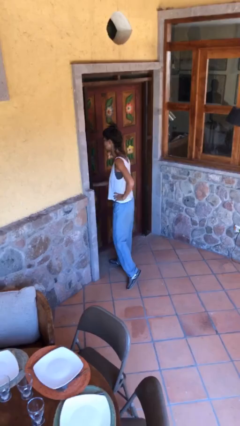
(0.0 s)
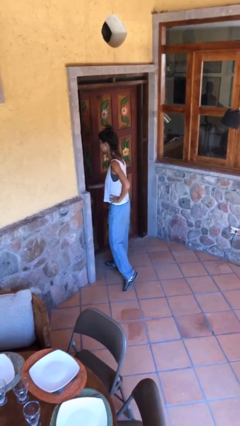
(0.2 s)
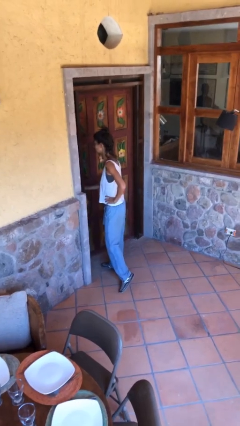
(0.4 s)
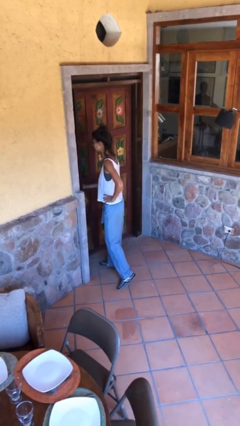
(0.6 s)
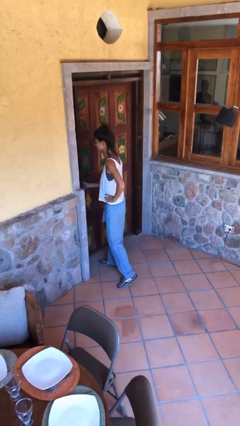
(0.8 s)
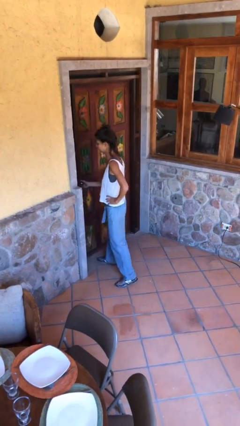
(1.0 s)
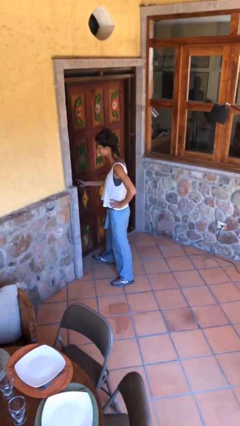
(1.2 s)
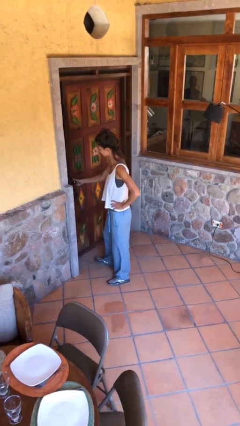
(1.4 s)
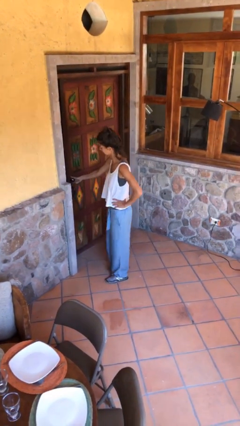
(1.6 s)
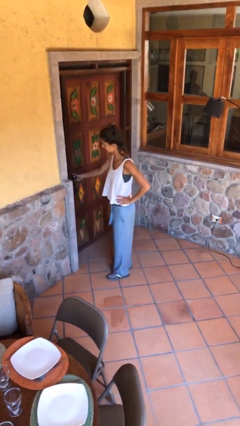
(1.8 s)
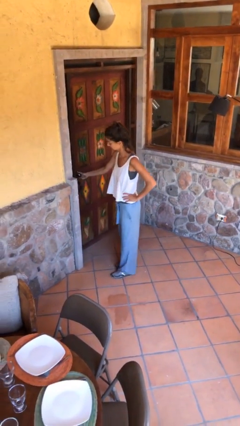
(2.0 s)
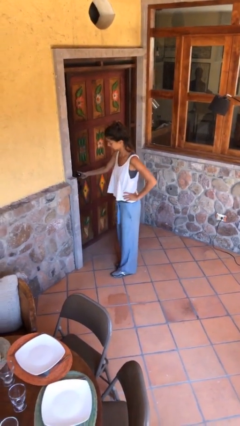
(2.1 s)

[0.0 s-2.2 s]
person closes facility door

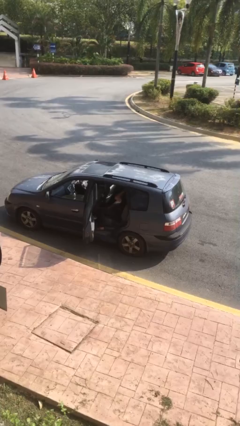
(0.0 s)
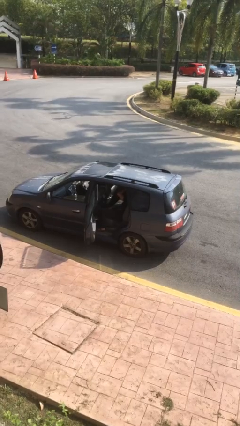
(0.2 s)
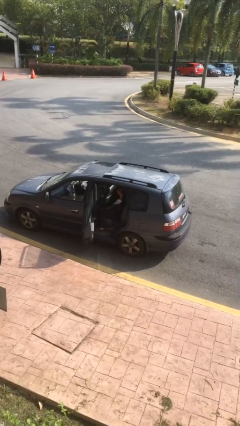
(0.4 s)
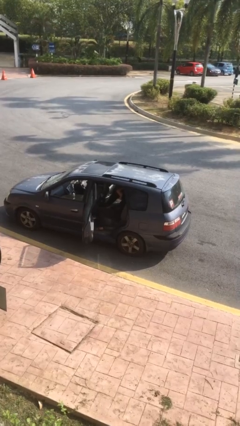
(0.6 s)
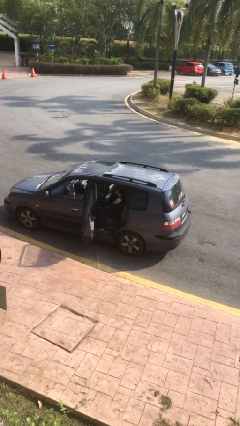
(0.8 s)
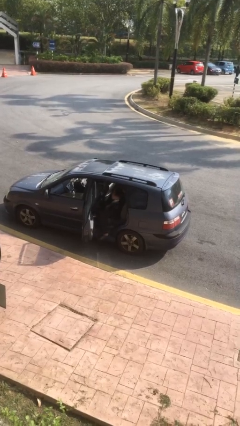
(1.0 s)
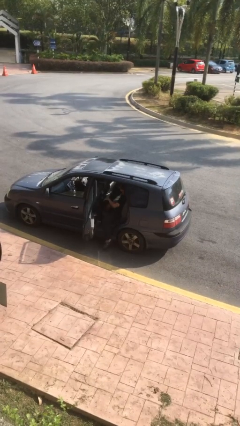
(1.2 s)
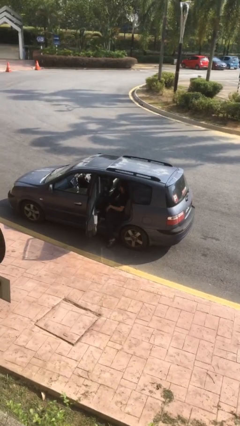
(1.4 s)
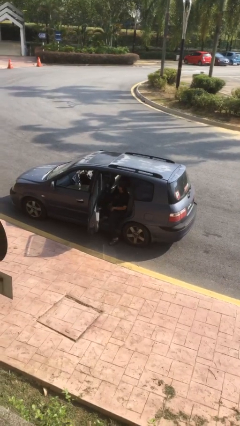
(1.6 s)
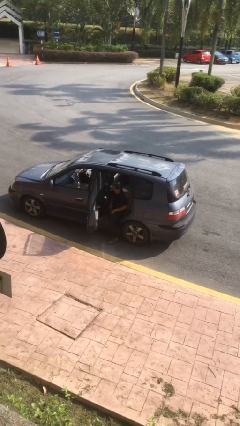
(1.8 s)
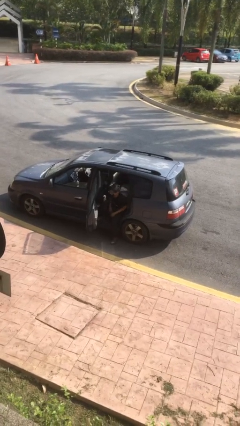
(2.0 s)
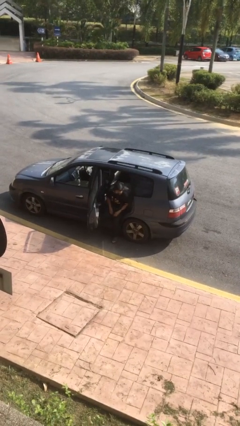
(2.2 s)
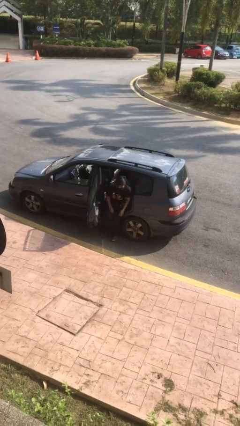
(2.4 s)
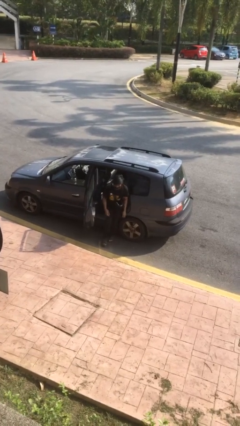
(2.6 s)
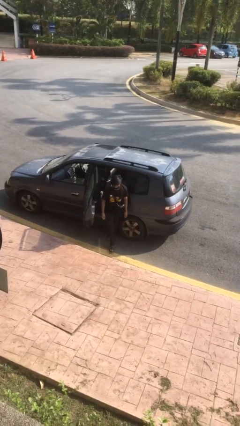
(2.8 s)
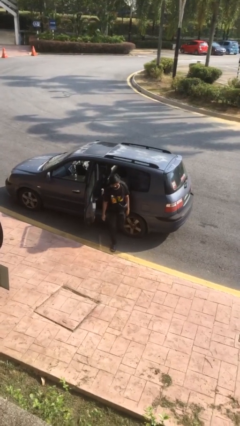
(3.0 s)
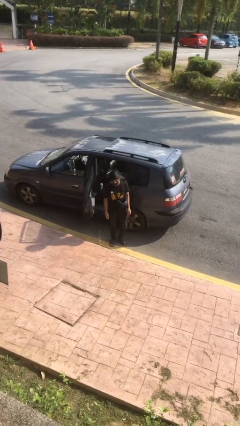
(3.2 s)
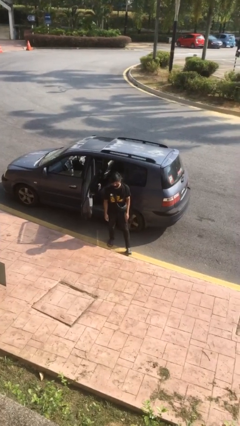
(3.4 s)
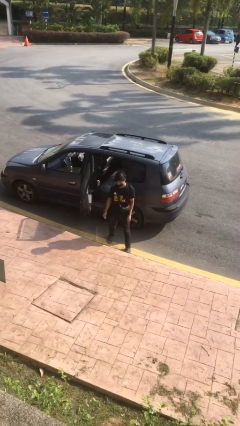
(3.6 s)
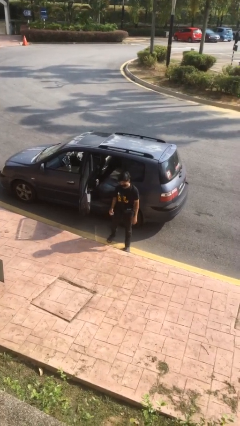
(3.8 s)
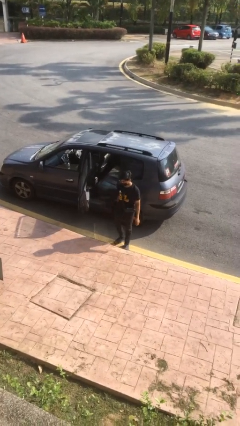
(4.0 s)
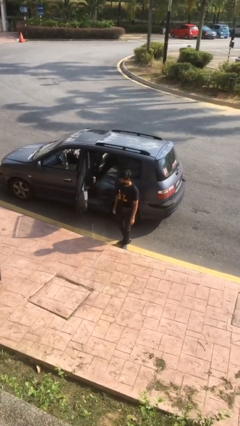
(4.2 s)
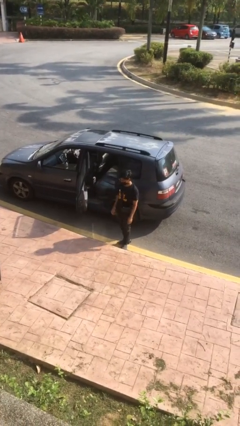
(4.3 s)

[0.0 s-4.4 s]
person exits car

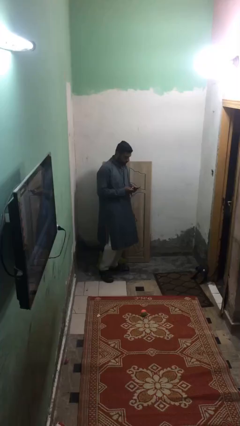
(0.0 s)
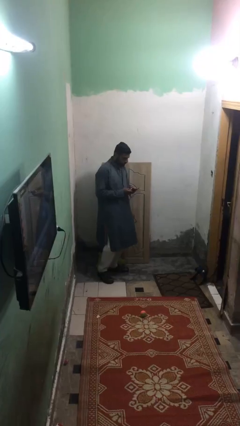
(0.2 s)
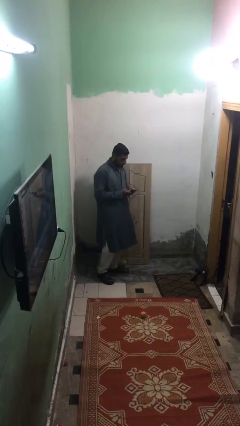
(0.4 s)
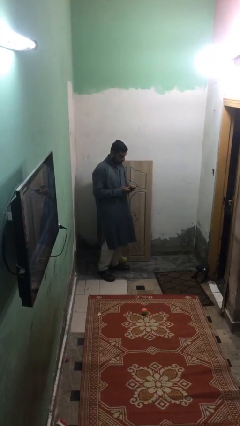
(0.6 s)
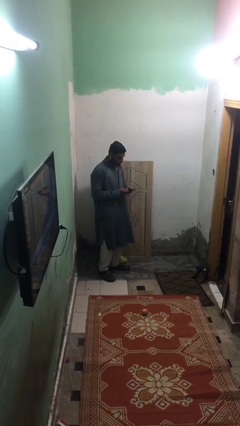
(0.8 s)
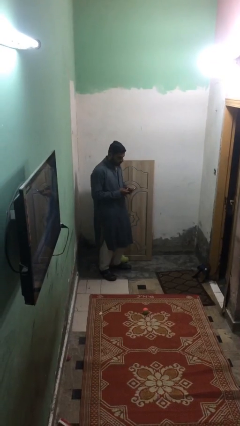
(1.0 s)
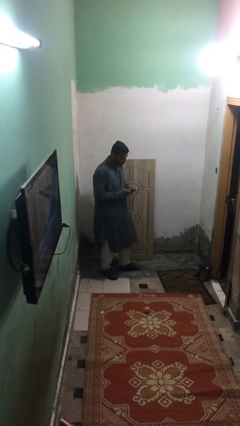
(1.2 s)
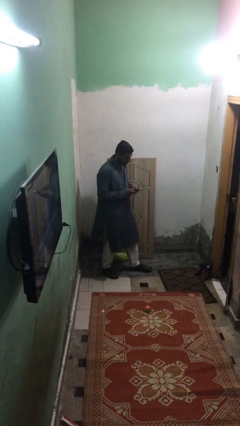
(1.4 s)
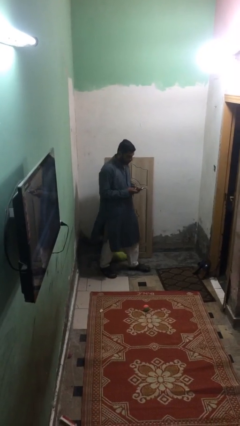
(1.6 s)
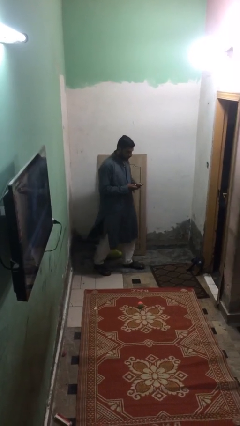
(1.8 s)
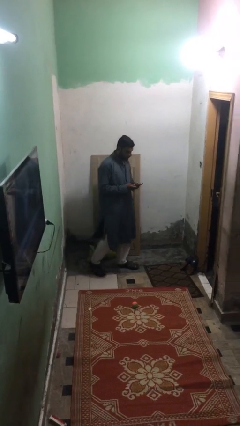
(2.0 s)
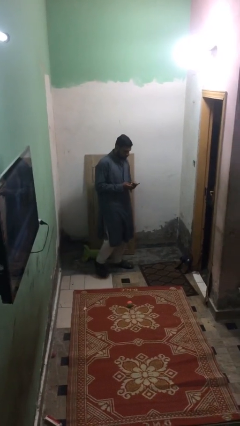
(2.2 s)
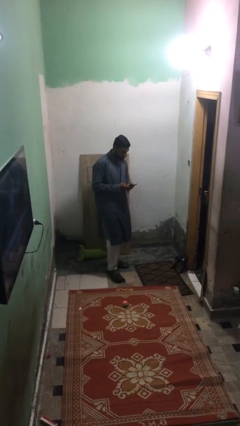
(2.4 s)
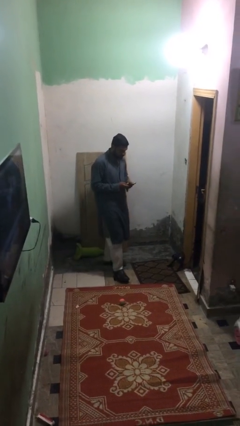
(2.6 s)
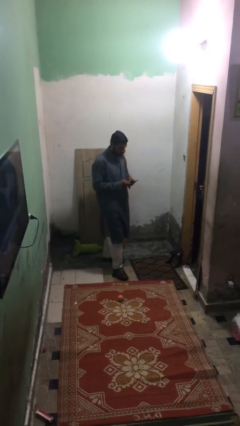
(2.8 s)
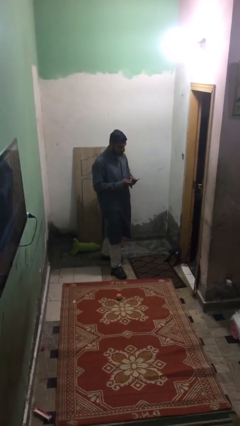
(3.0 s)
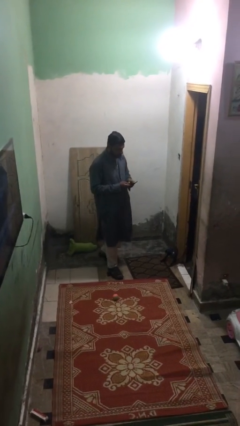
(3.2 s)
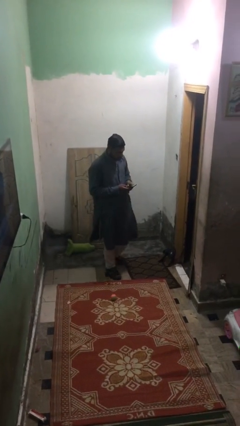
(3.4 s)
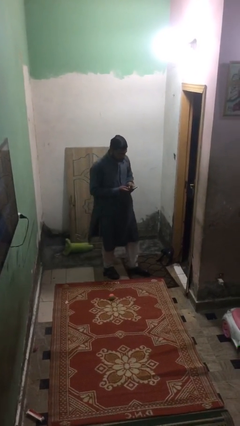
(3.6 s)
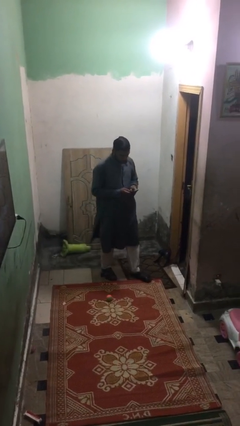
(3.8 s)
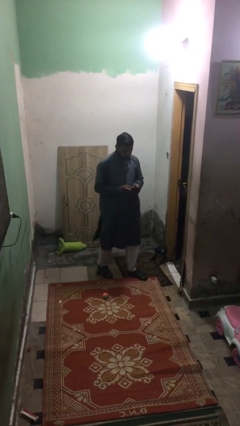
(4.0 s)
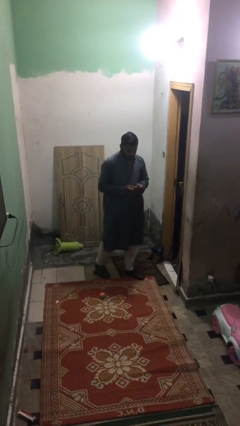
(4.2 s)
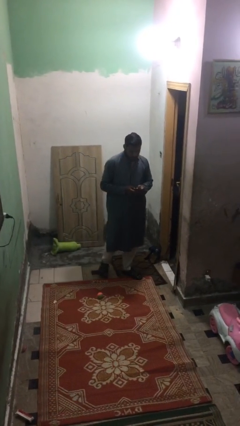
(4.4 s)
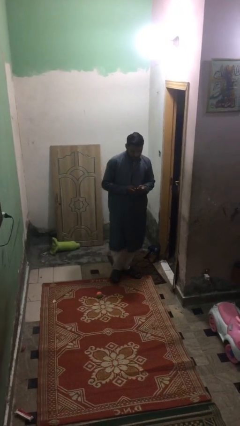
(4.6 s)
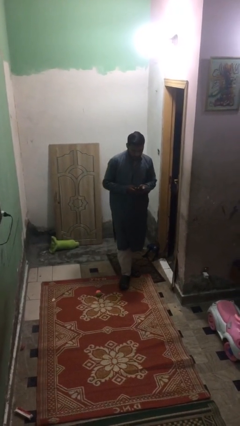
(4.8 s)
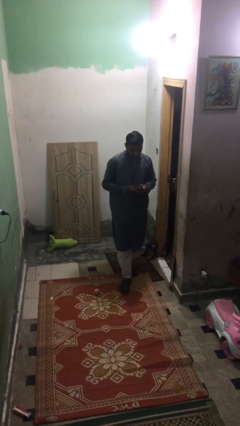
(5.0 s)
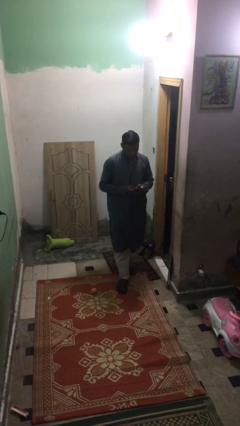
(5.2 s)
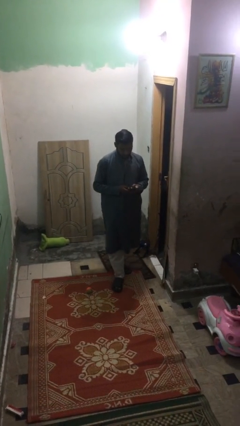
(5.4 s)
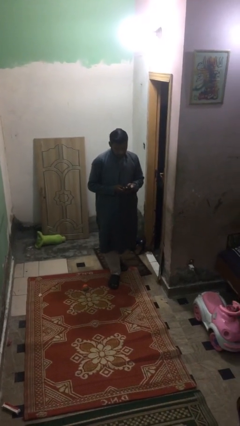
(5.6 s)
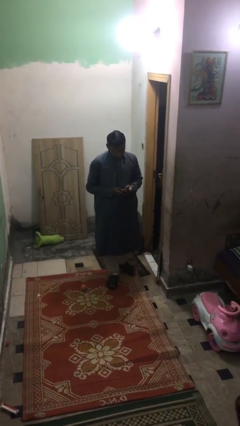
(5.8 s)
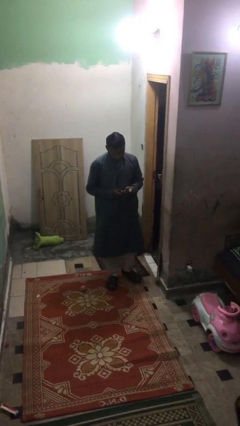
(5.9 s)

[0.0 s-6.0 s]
person texts on phone

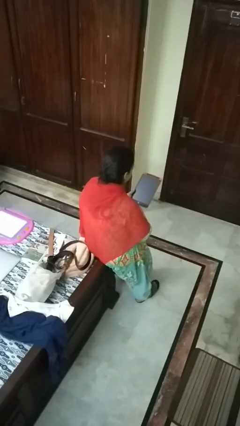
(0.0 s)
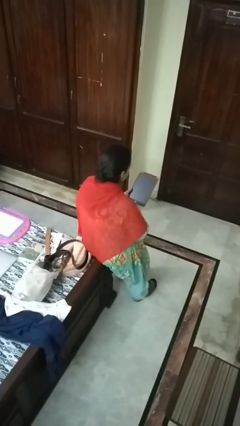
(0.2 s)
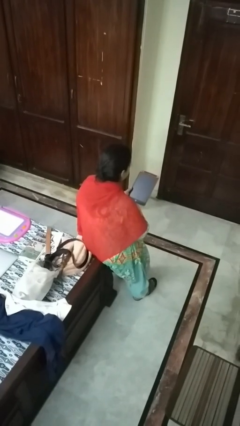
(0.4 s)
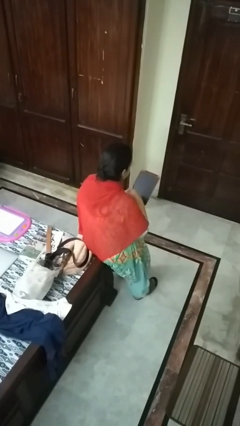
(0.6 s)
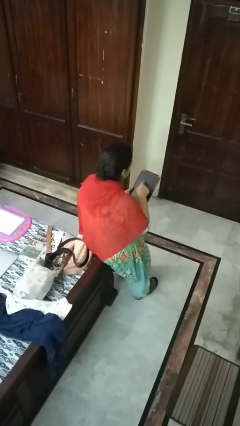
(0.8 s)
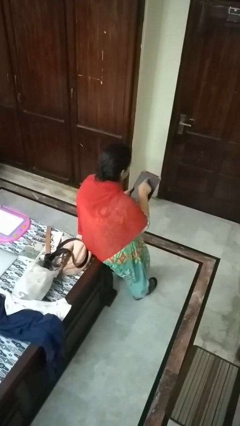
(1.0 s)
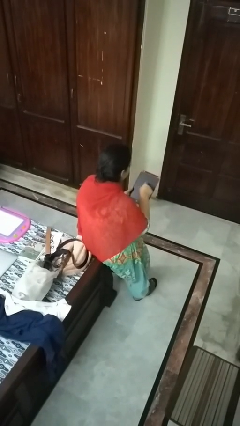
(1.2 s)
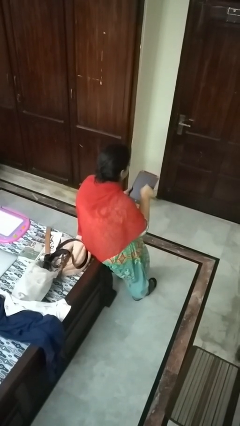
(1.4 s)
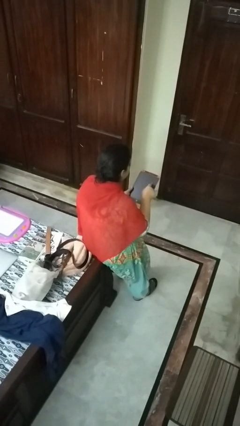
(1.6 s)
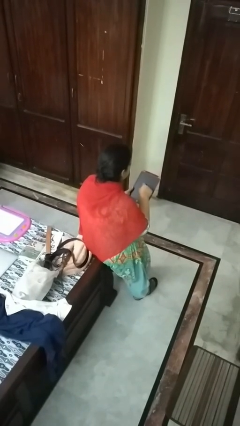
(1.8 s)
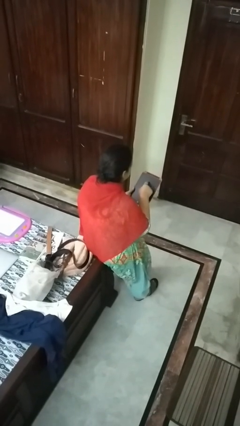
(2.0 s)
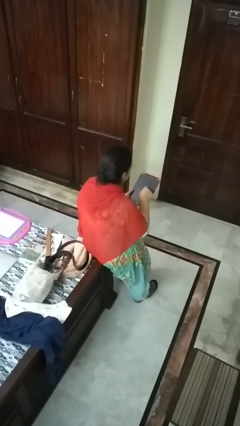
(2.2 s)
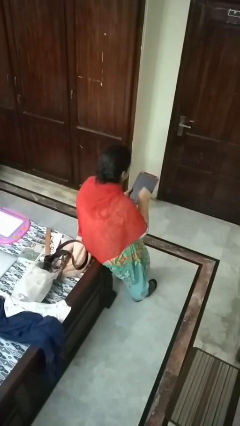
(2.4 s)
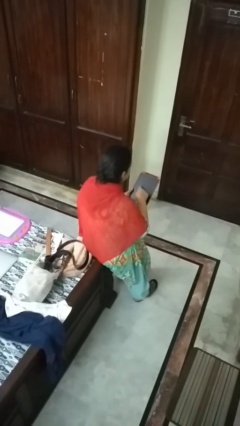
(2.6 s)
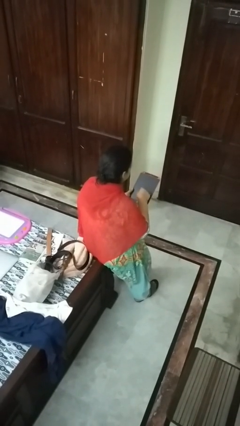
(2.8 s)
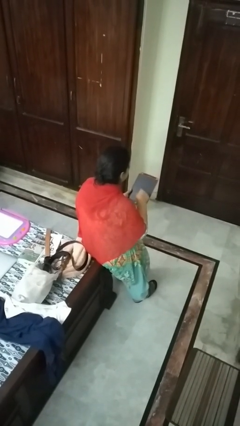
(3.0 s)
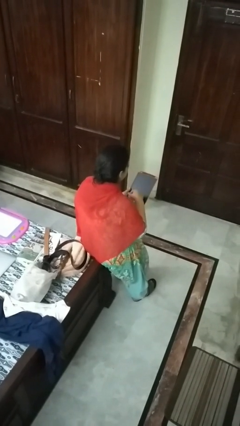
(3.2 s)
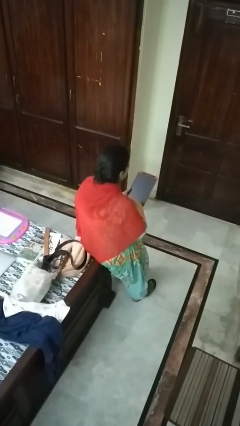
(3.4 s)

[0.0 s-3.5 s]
person interacts with tablet

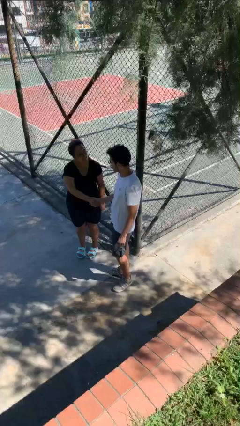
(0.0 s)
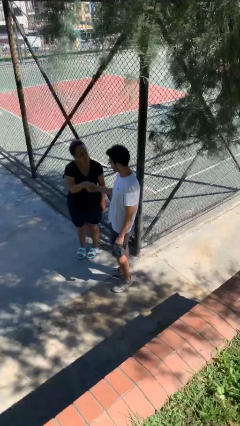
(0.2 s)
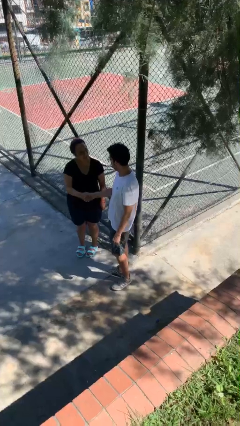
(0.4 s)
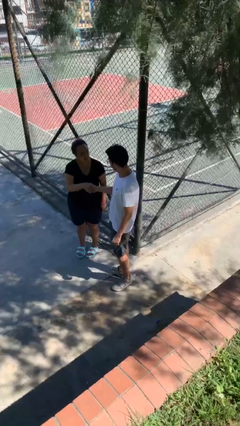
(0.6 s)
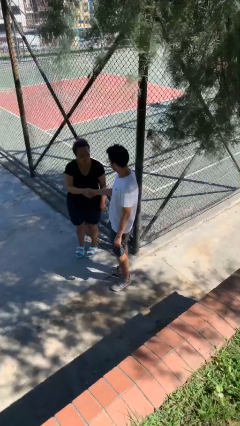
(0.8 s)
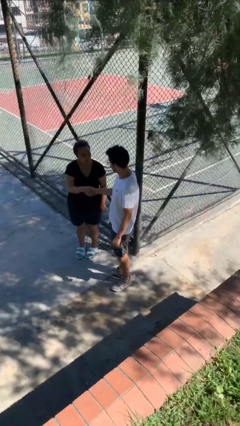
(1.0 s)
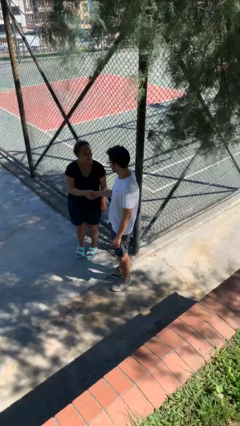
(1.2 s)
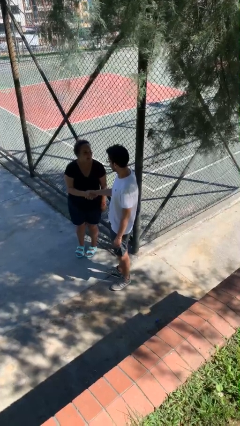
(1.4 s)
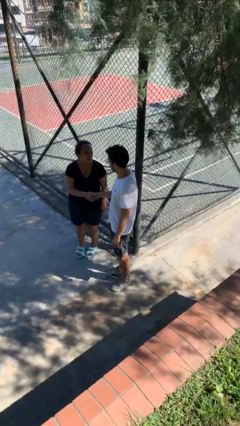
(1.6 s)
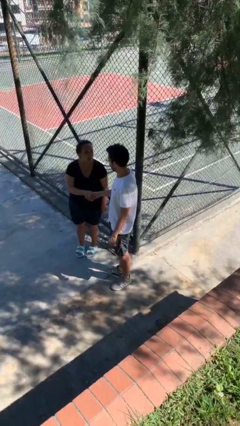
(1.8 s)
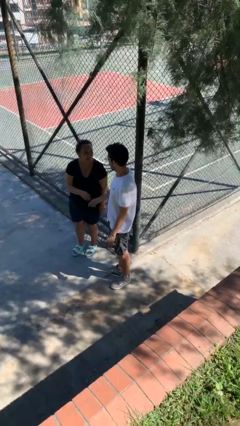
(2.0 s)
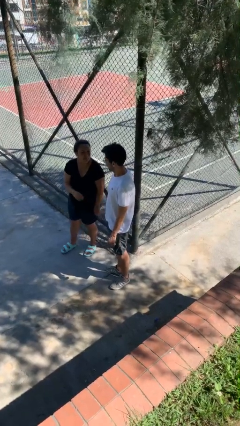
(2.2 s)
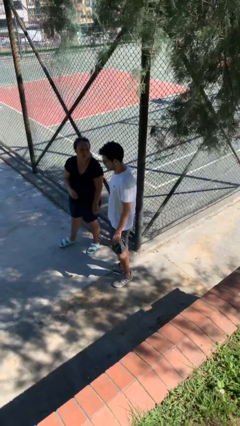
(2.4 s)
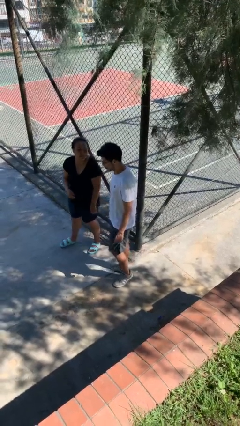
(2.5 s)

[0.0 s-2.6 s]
person shakes hand
